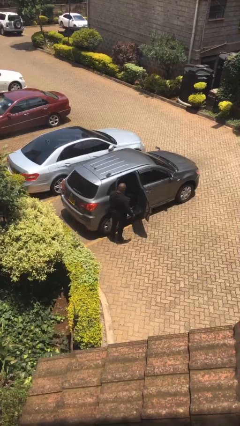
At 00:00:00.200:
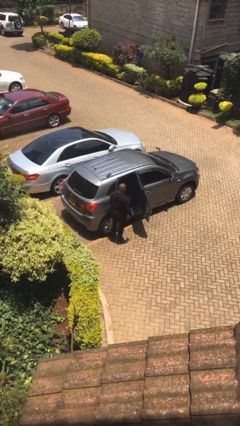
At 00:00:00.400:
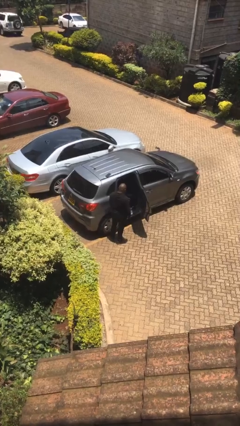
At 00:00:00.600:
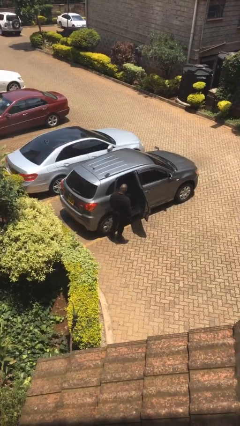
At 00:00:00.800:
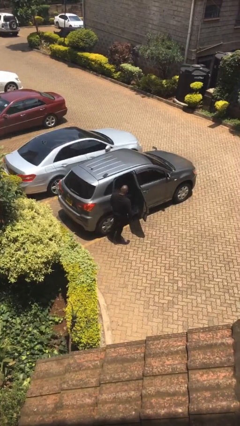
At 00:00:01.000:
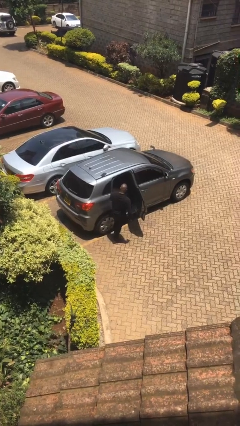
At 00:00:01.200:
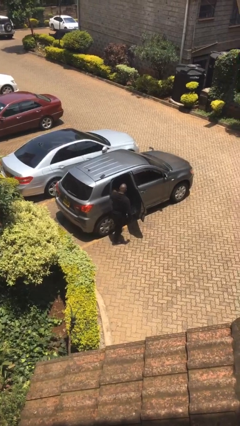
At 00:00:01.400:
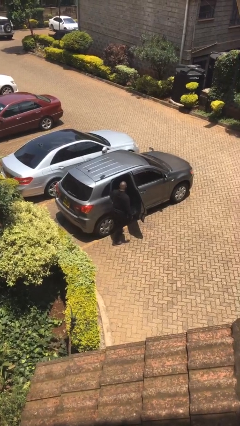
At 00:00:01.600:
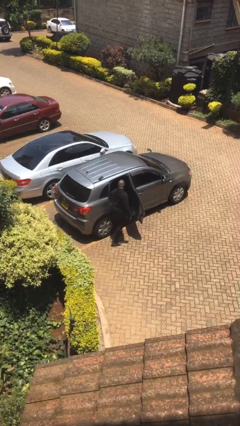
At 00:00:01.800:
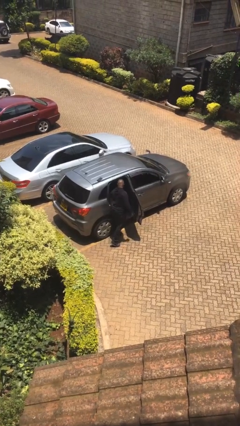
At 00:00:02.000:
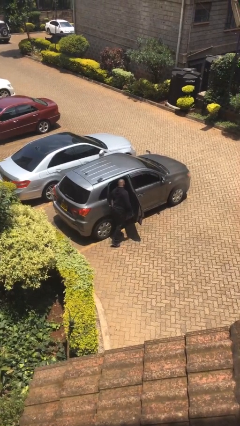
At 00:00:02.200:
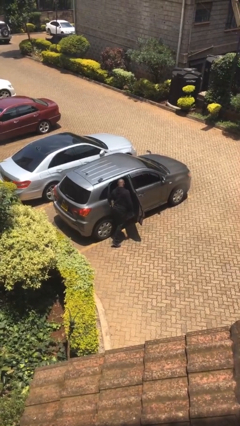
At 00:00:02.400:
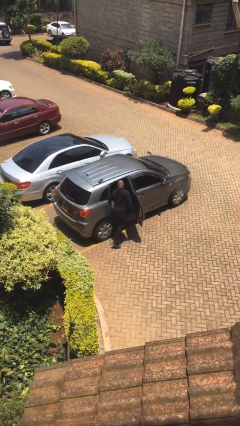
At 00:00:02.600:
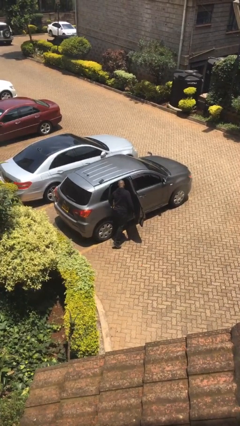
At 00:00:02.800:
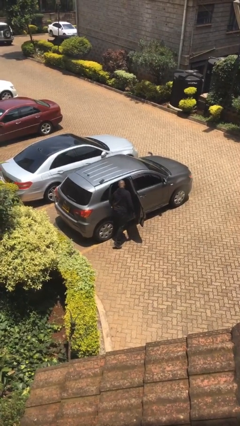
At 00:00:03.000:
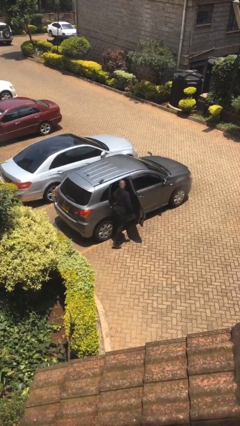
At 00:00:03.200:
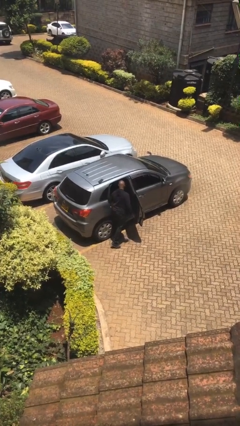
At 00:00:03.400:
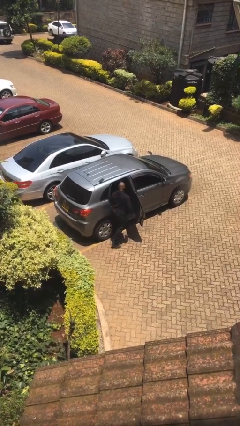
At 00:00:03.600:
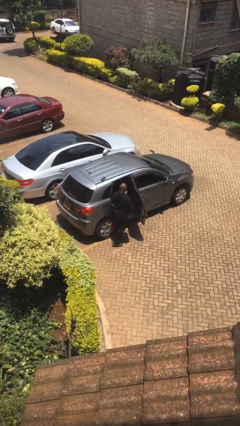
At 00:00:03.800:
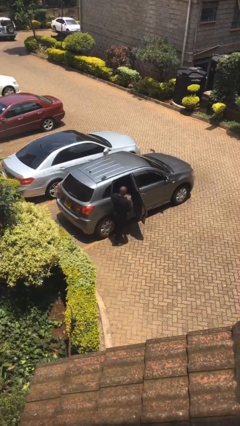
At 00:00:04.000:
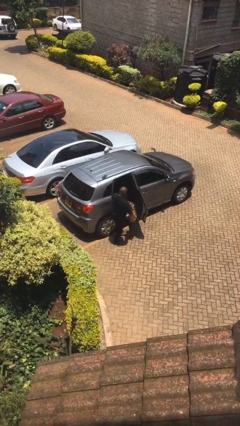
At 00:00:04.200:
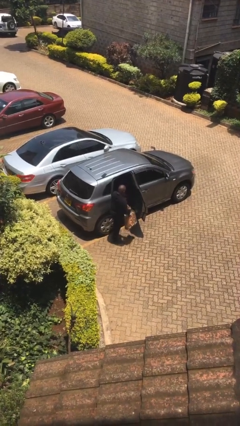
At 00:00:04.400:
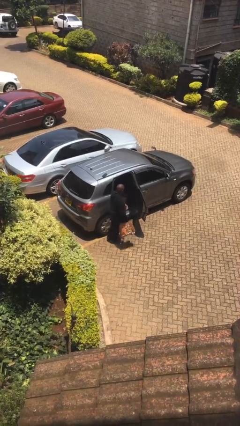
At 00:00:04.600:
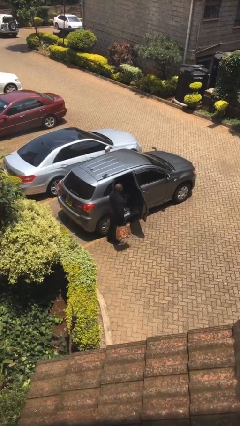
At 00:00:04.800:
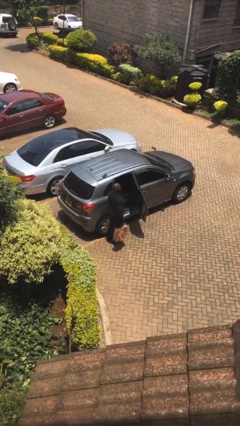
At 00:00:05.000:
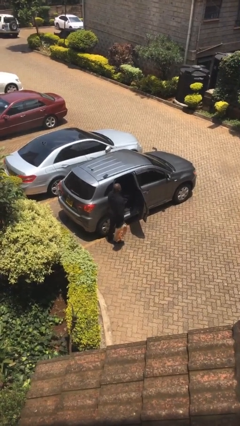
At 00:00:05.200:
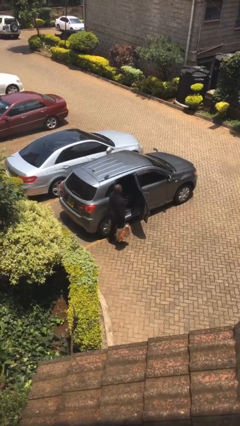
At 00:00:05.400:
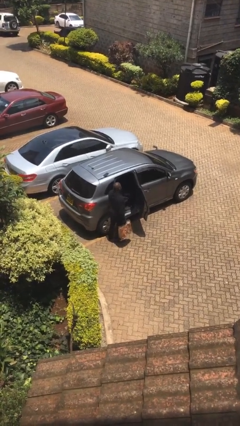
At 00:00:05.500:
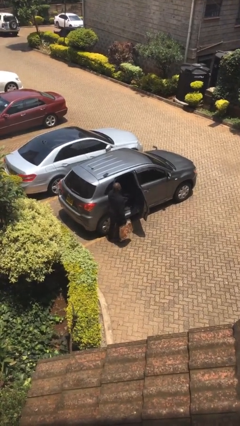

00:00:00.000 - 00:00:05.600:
person unloads car

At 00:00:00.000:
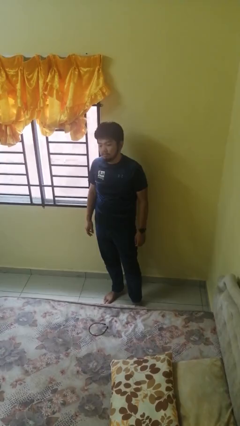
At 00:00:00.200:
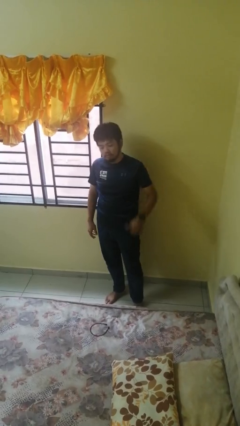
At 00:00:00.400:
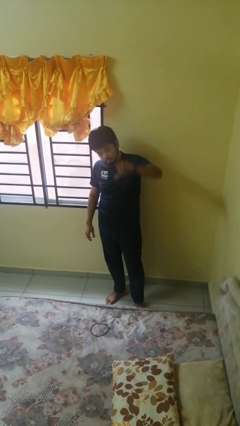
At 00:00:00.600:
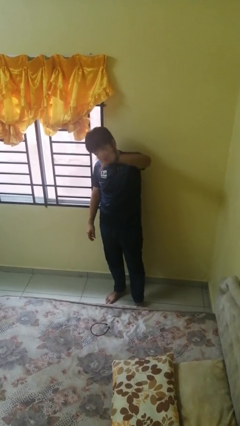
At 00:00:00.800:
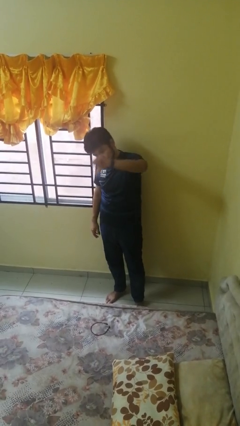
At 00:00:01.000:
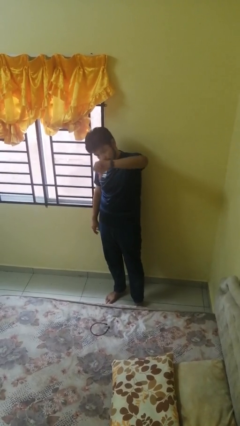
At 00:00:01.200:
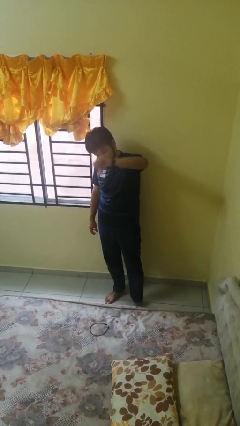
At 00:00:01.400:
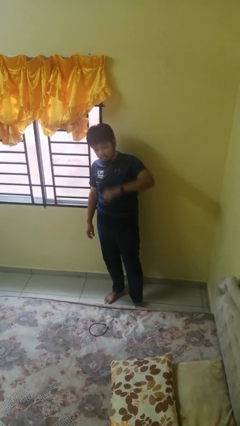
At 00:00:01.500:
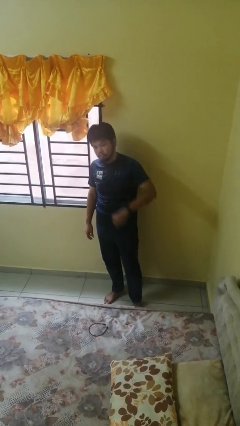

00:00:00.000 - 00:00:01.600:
person gestures thumbs down

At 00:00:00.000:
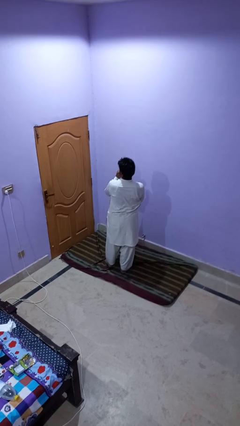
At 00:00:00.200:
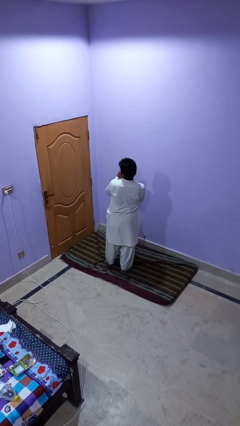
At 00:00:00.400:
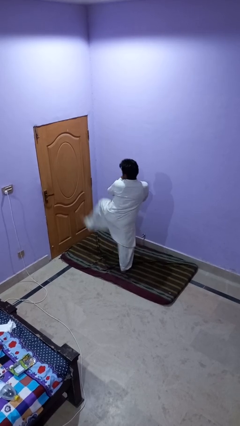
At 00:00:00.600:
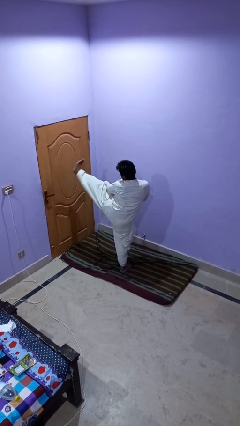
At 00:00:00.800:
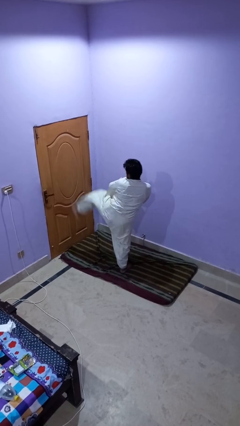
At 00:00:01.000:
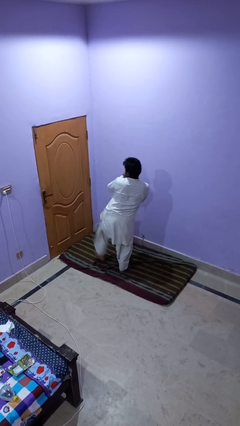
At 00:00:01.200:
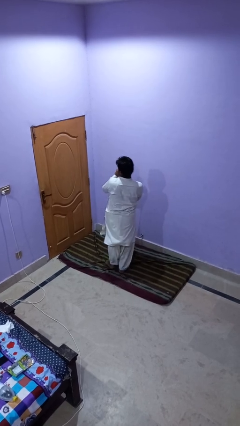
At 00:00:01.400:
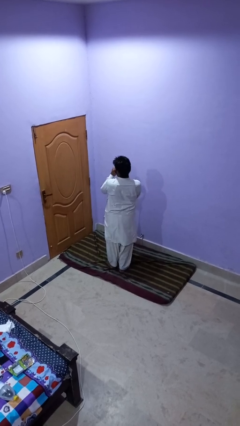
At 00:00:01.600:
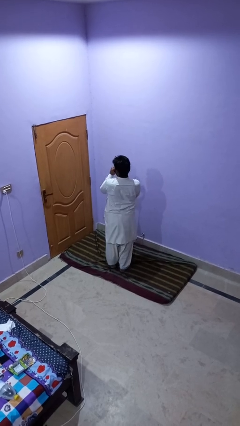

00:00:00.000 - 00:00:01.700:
person karate kicks

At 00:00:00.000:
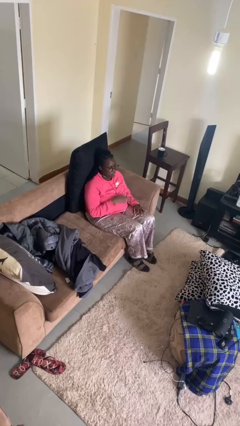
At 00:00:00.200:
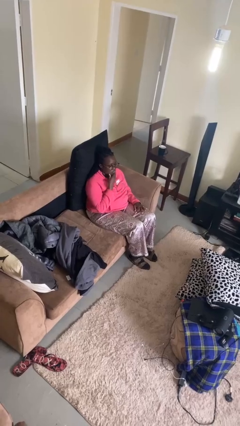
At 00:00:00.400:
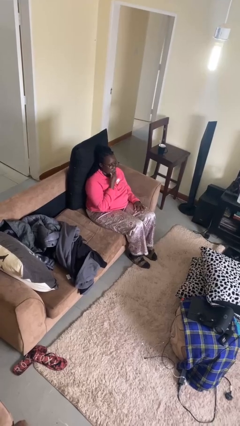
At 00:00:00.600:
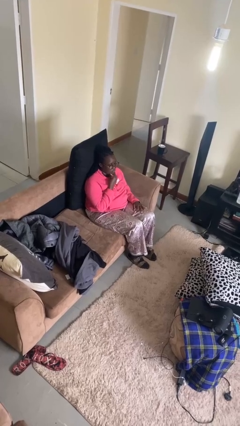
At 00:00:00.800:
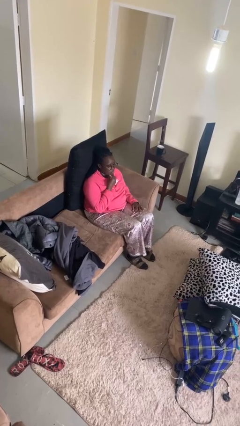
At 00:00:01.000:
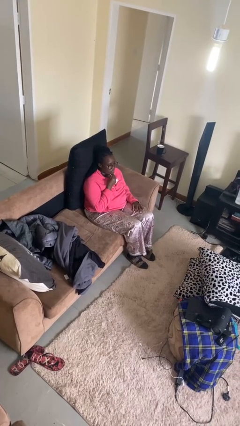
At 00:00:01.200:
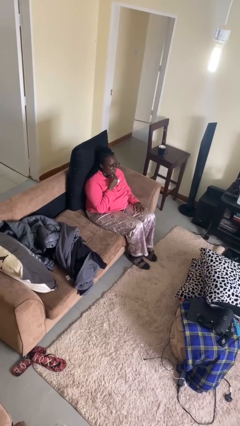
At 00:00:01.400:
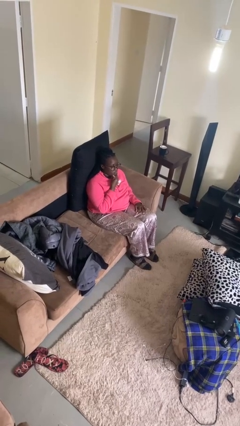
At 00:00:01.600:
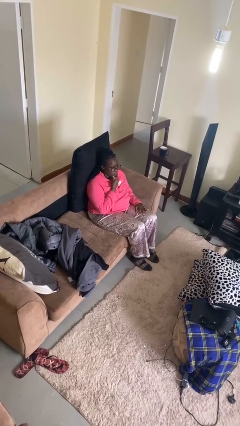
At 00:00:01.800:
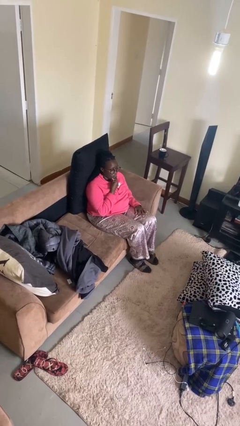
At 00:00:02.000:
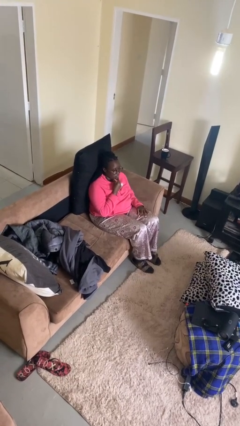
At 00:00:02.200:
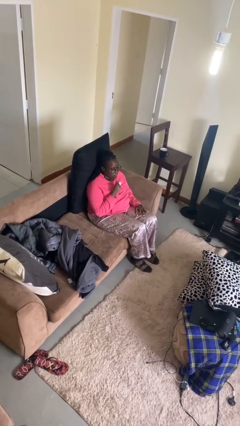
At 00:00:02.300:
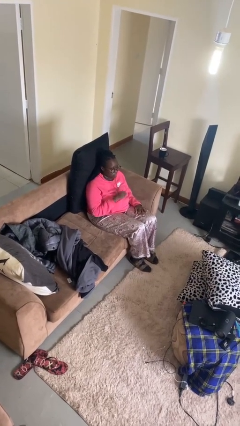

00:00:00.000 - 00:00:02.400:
person strokes chin

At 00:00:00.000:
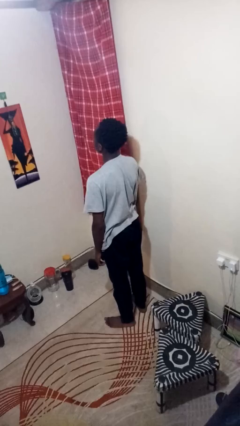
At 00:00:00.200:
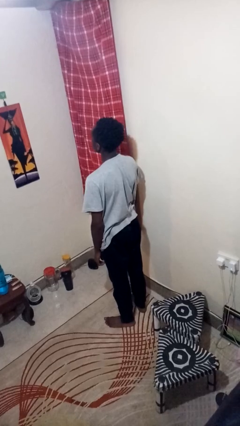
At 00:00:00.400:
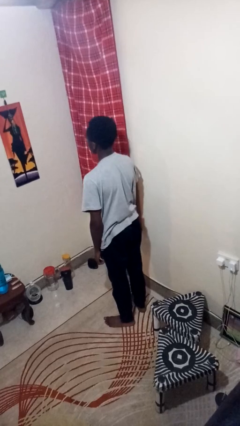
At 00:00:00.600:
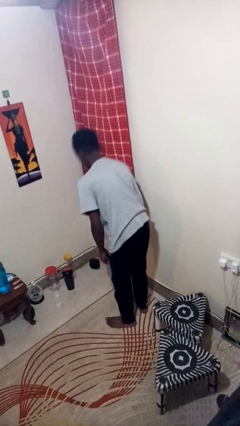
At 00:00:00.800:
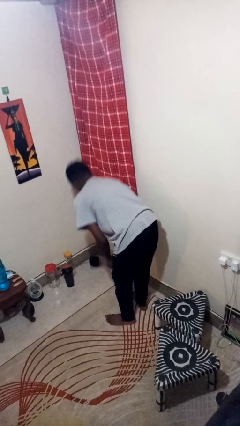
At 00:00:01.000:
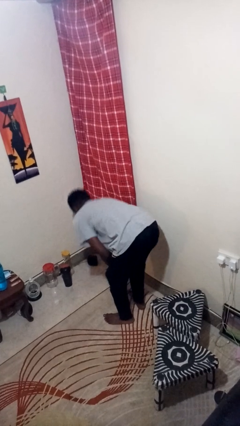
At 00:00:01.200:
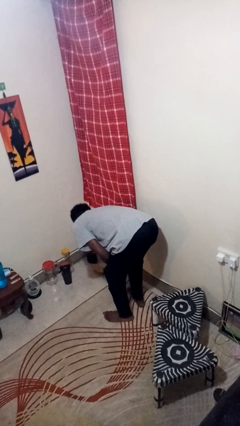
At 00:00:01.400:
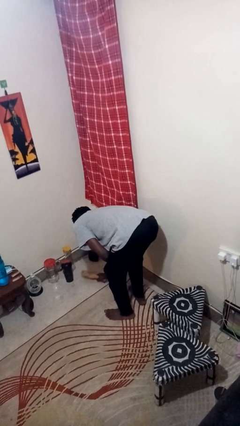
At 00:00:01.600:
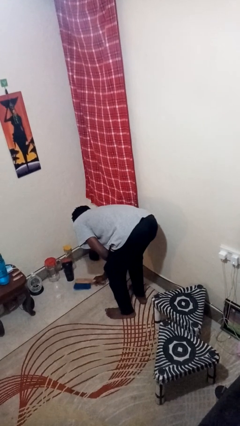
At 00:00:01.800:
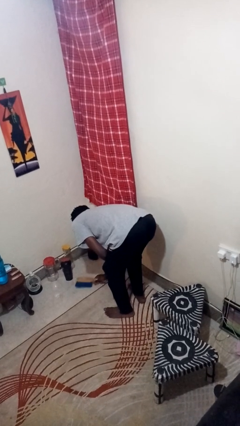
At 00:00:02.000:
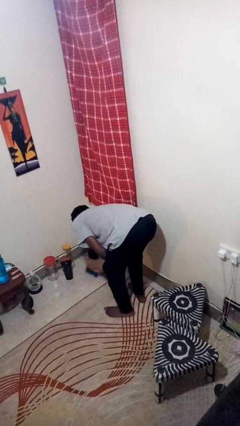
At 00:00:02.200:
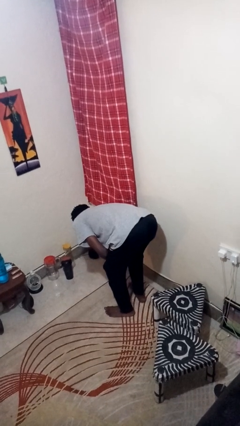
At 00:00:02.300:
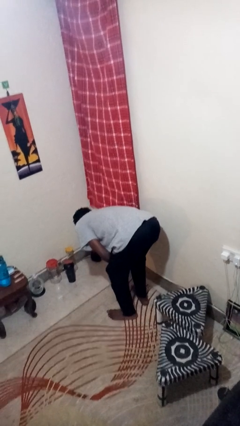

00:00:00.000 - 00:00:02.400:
person sweeps floor

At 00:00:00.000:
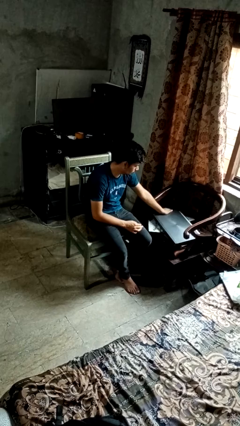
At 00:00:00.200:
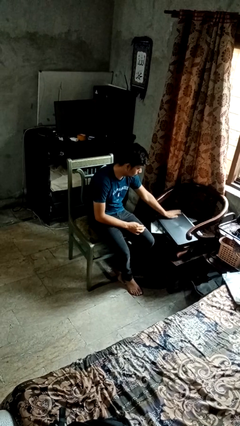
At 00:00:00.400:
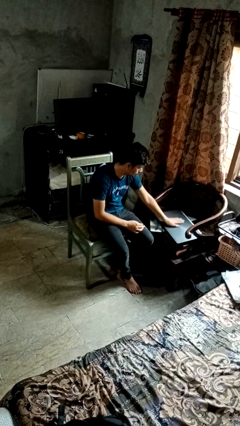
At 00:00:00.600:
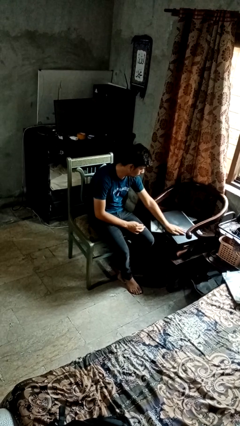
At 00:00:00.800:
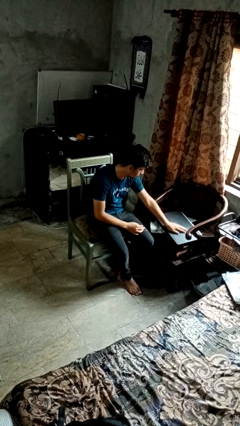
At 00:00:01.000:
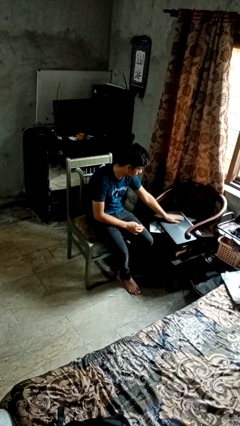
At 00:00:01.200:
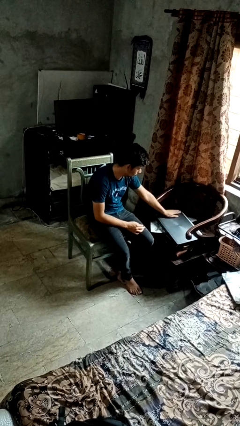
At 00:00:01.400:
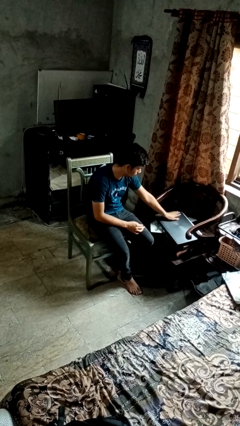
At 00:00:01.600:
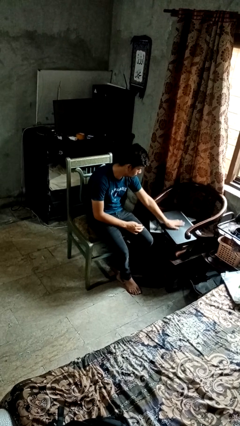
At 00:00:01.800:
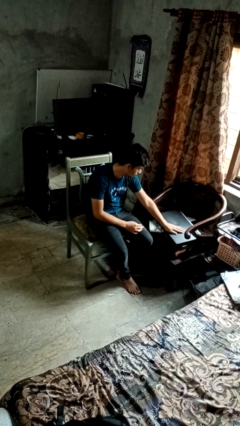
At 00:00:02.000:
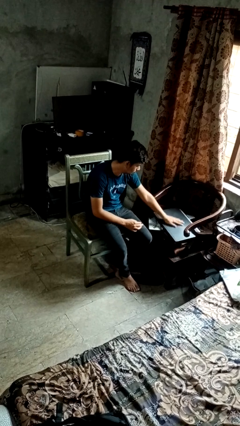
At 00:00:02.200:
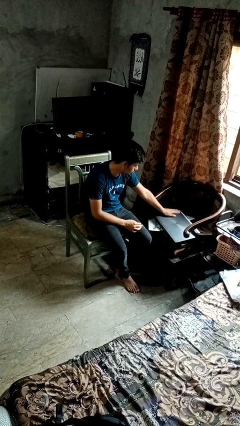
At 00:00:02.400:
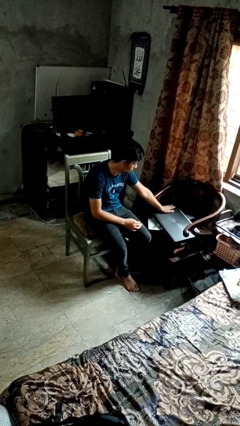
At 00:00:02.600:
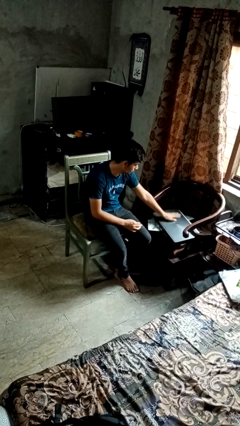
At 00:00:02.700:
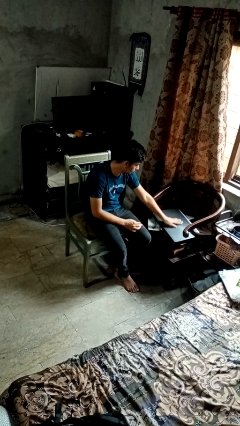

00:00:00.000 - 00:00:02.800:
person waves hand over object

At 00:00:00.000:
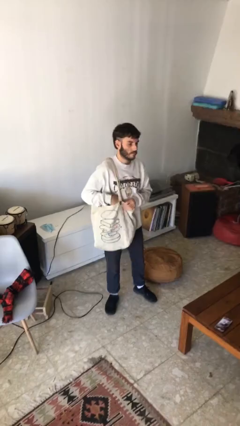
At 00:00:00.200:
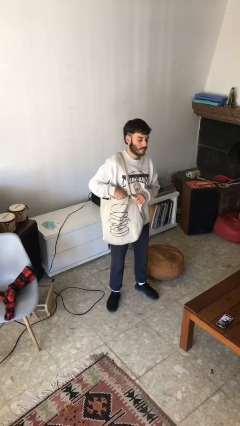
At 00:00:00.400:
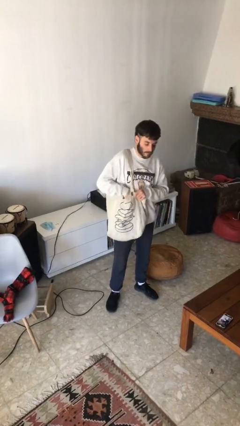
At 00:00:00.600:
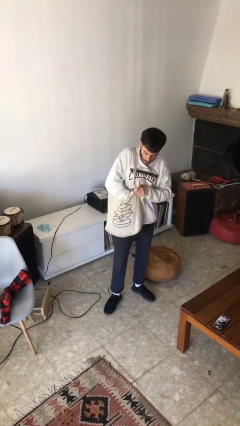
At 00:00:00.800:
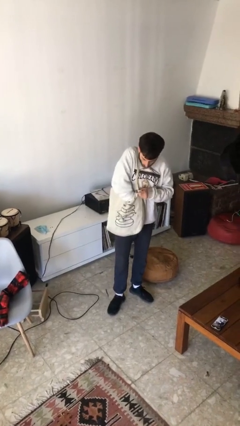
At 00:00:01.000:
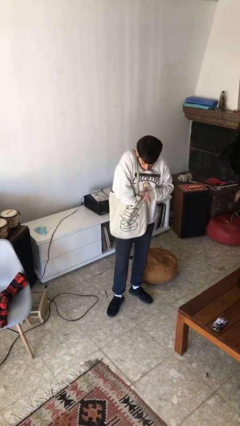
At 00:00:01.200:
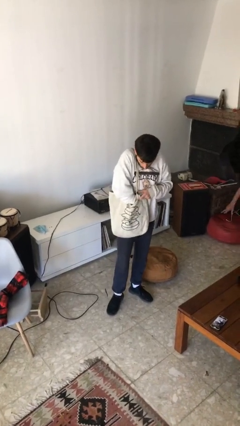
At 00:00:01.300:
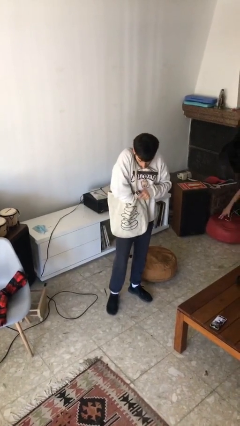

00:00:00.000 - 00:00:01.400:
person searches in purse
